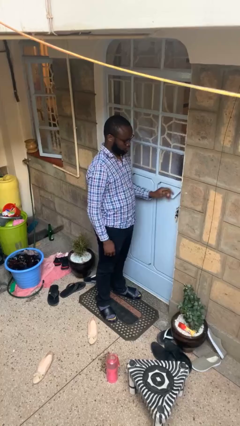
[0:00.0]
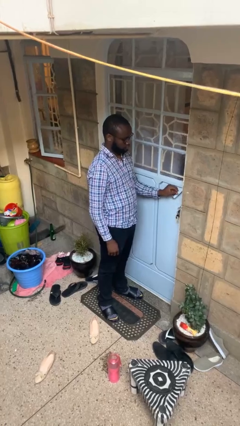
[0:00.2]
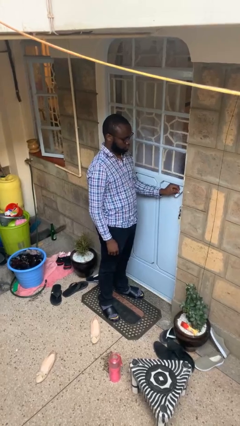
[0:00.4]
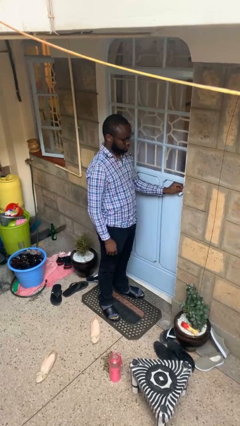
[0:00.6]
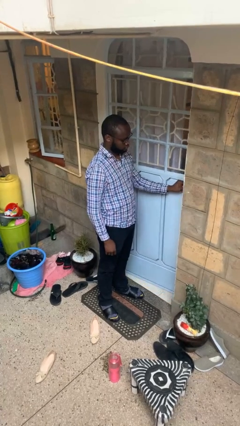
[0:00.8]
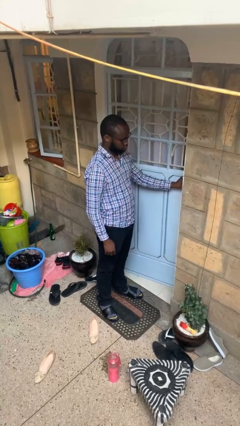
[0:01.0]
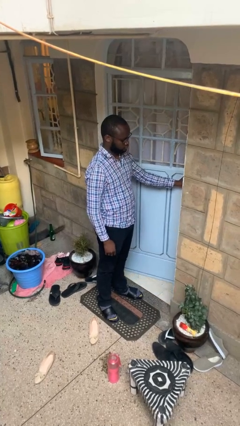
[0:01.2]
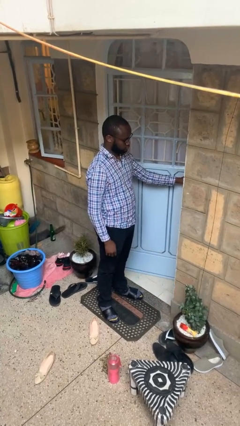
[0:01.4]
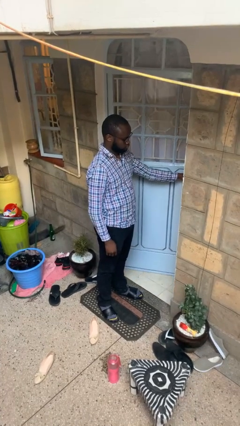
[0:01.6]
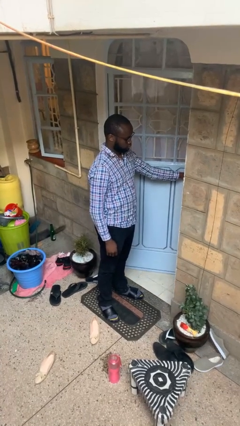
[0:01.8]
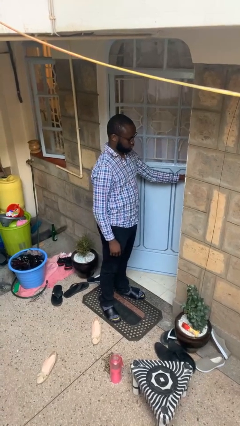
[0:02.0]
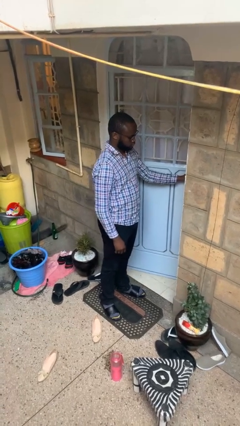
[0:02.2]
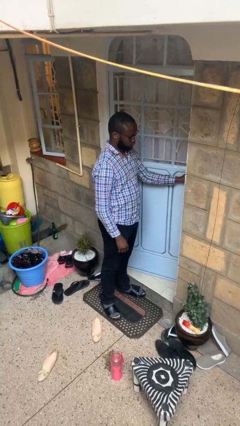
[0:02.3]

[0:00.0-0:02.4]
person opens facility door

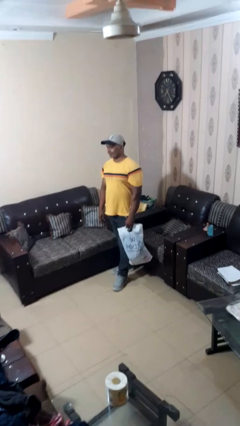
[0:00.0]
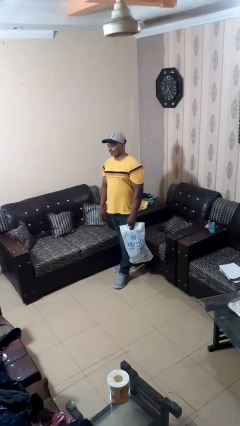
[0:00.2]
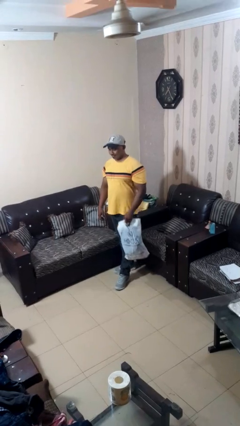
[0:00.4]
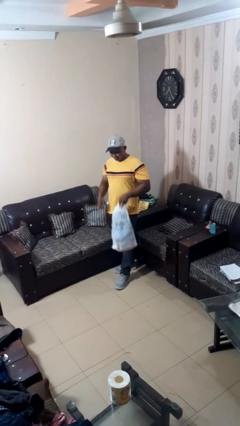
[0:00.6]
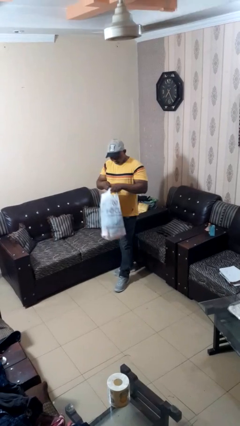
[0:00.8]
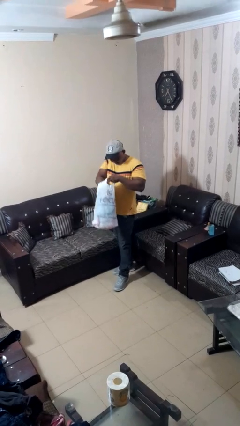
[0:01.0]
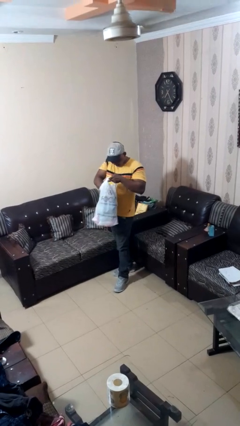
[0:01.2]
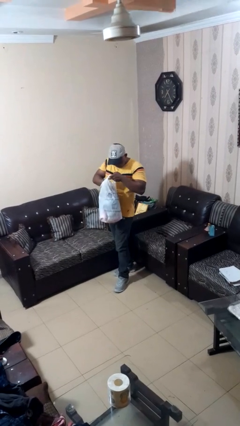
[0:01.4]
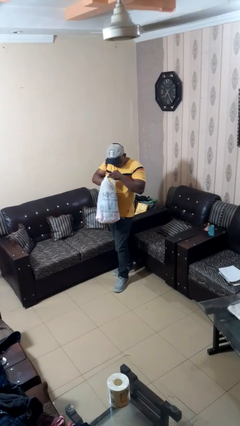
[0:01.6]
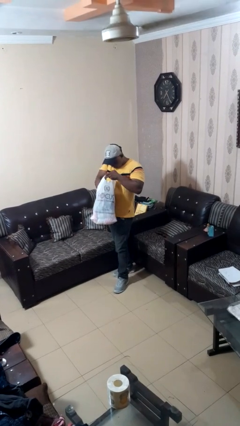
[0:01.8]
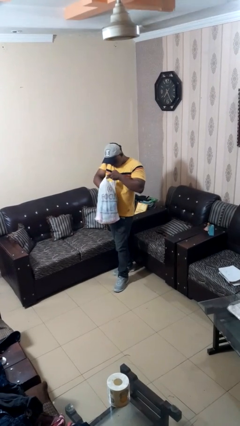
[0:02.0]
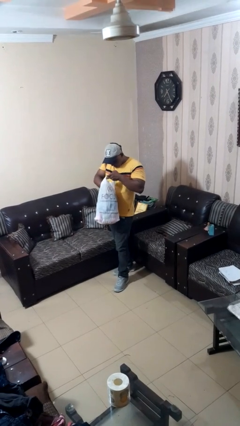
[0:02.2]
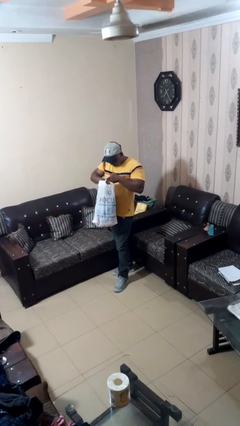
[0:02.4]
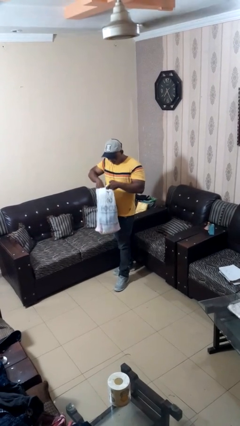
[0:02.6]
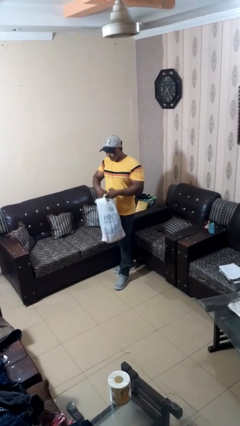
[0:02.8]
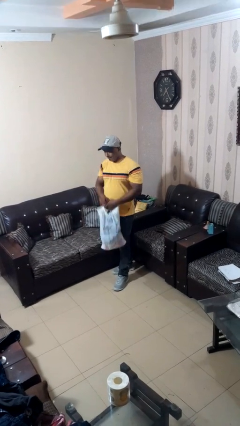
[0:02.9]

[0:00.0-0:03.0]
person searches in bag

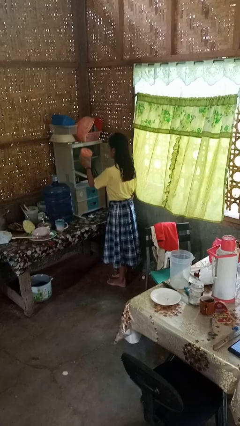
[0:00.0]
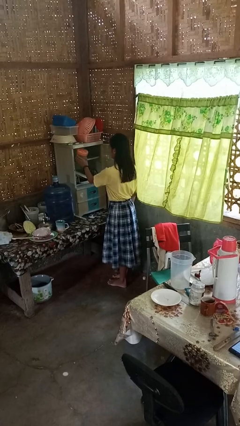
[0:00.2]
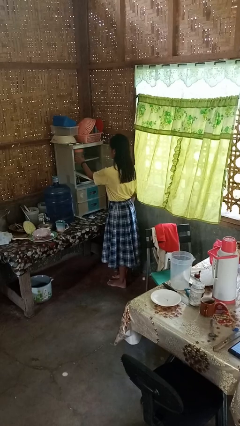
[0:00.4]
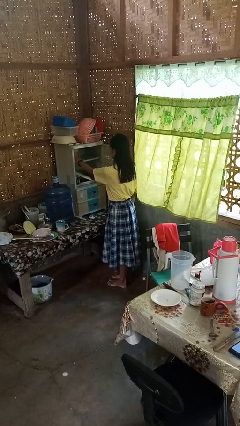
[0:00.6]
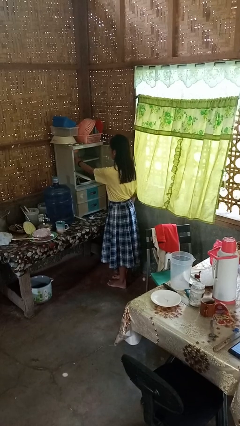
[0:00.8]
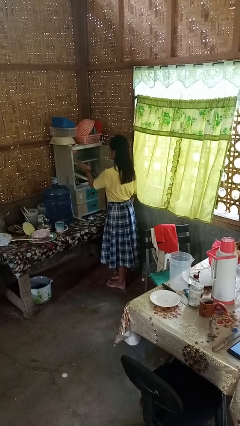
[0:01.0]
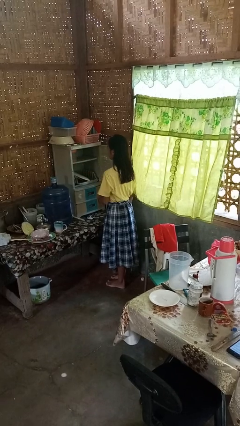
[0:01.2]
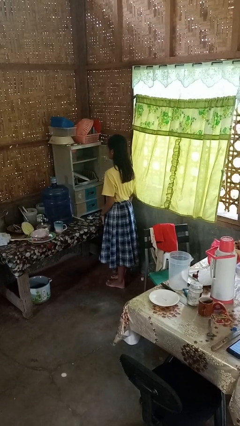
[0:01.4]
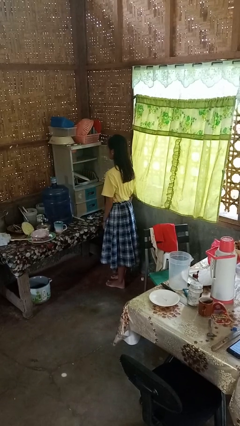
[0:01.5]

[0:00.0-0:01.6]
person puts down object into cabinet

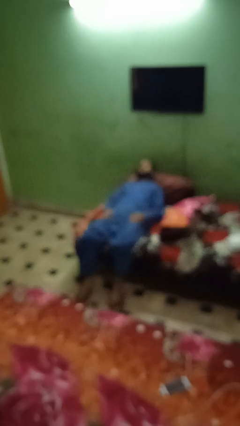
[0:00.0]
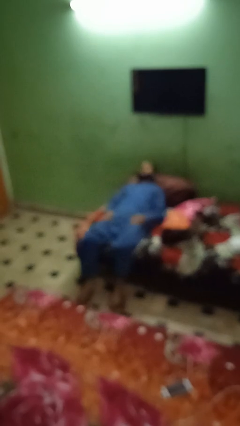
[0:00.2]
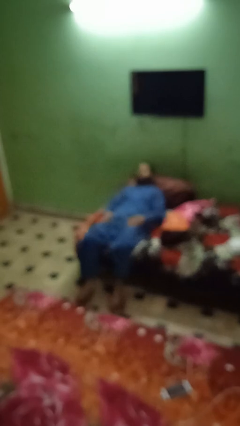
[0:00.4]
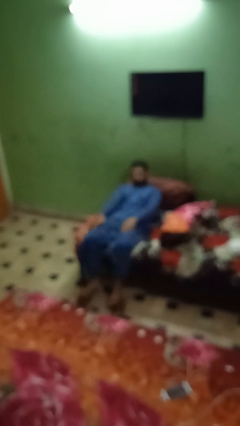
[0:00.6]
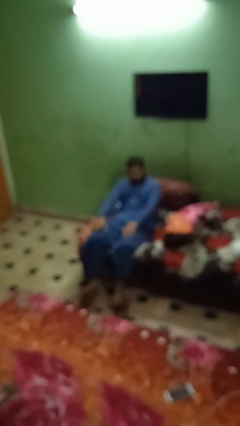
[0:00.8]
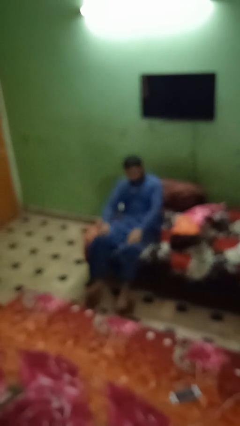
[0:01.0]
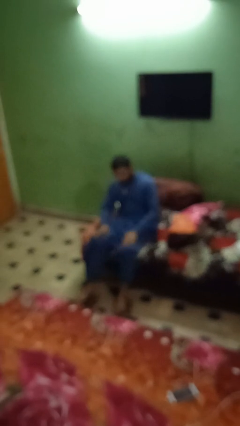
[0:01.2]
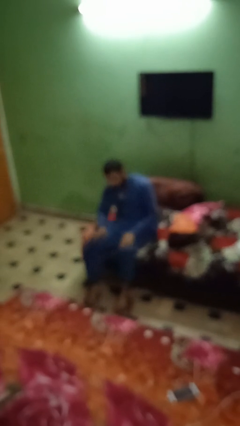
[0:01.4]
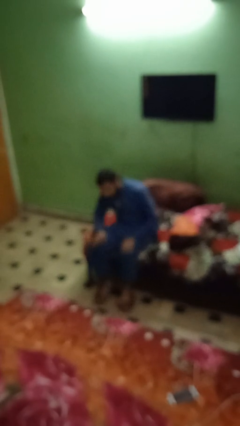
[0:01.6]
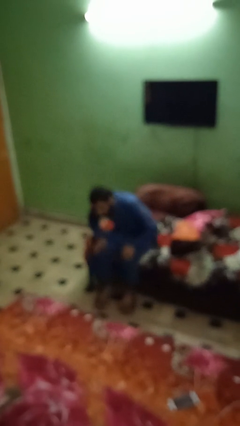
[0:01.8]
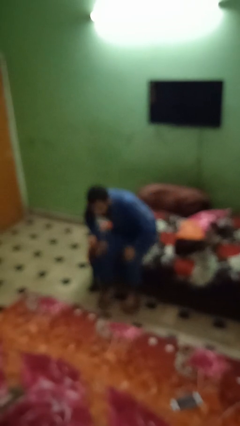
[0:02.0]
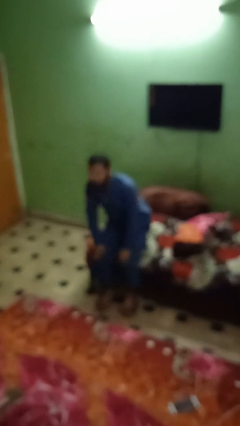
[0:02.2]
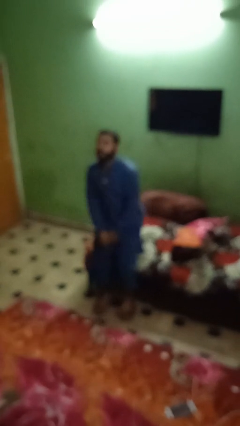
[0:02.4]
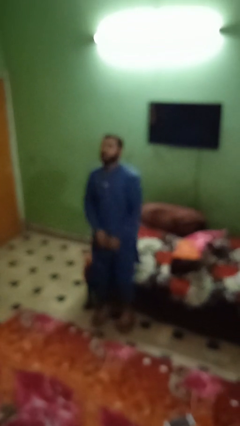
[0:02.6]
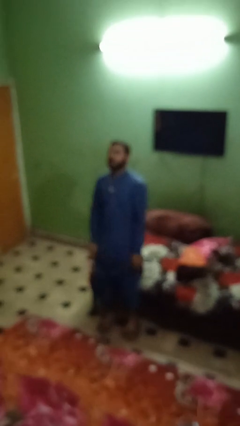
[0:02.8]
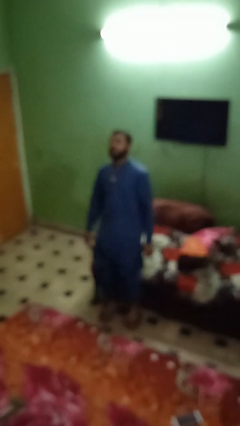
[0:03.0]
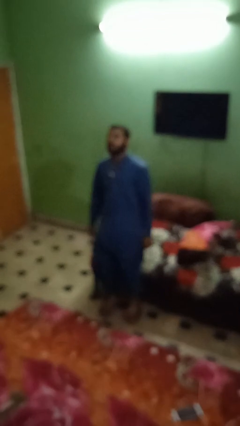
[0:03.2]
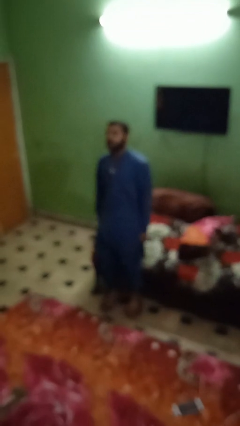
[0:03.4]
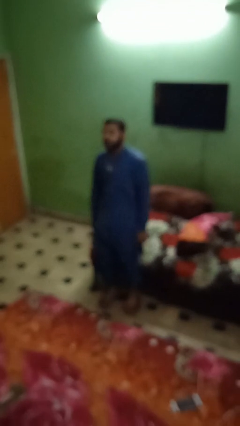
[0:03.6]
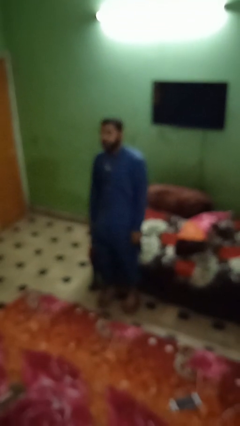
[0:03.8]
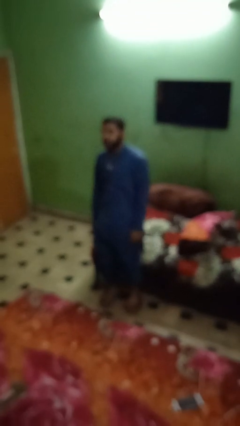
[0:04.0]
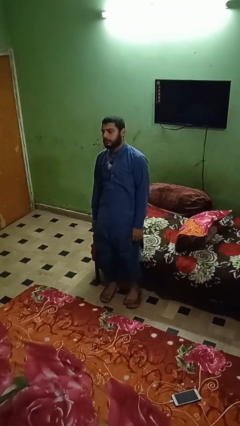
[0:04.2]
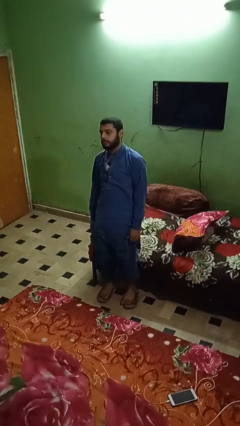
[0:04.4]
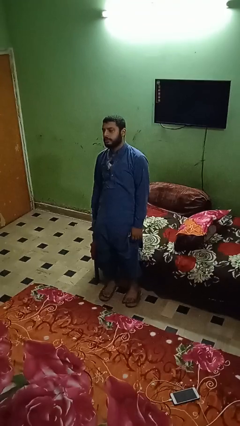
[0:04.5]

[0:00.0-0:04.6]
person stands up

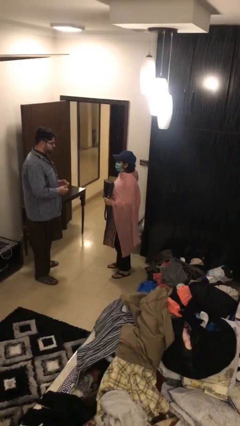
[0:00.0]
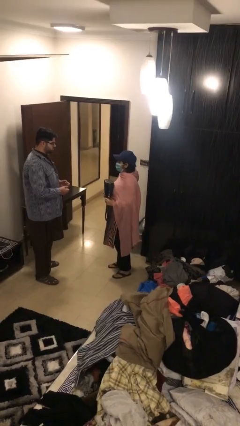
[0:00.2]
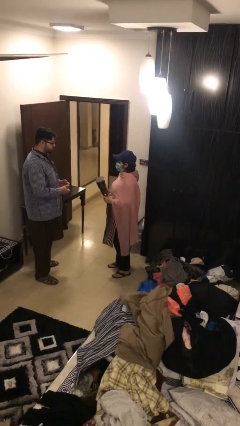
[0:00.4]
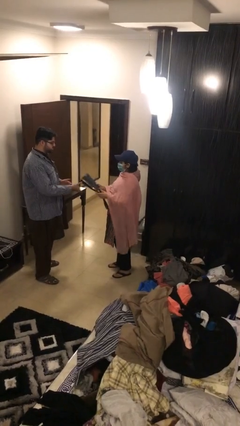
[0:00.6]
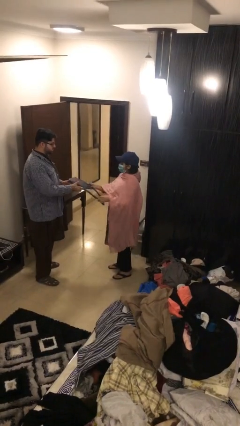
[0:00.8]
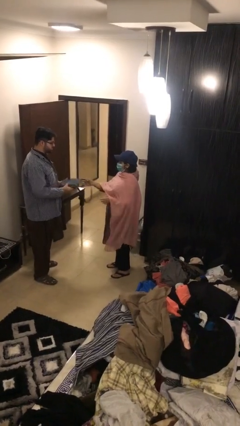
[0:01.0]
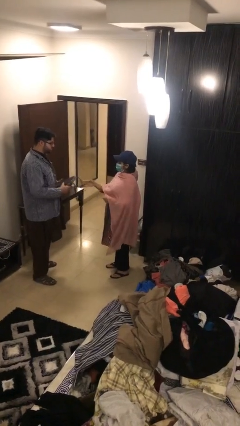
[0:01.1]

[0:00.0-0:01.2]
person transfers object to person

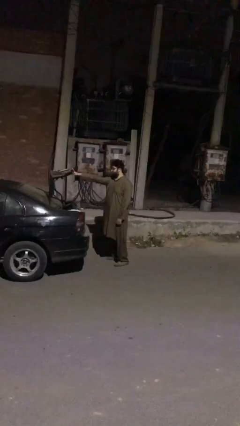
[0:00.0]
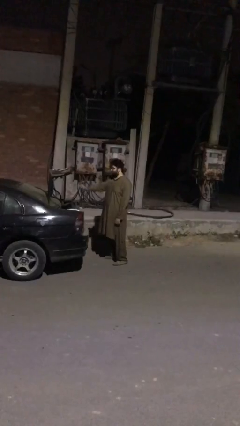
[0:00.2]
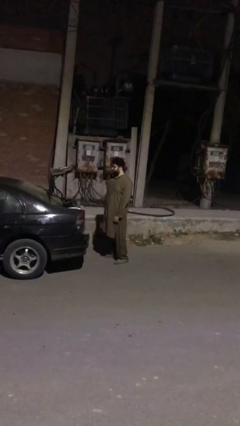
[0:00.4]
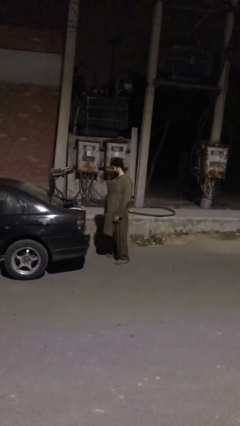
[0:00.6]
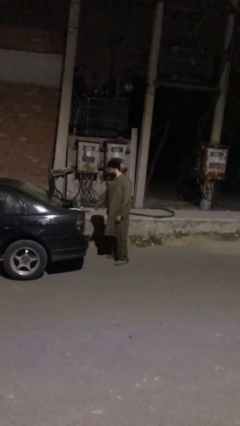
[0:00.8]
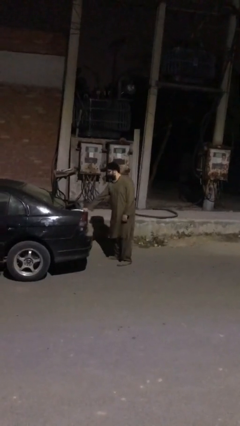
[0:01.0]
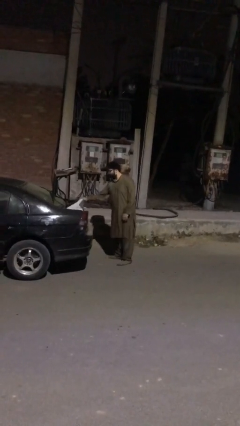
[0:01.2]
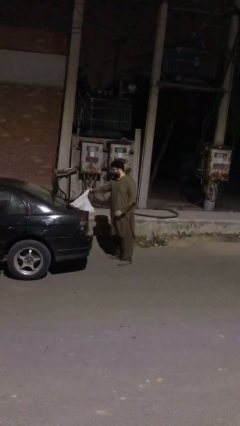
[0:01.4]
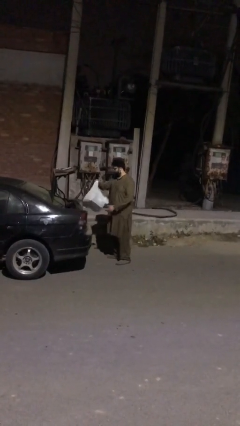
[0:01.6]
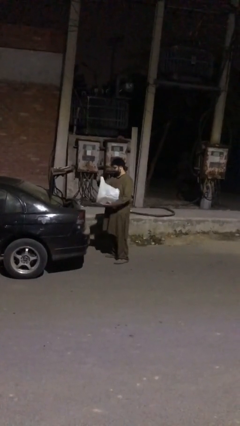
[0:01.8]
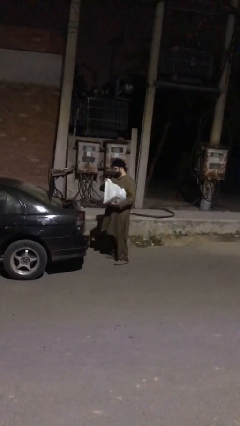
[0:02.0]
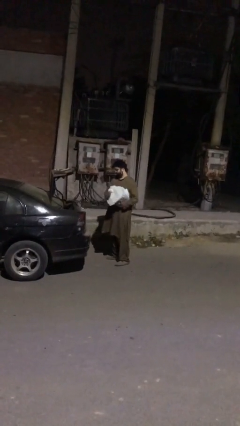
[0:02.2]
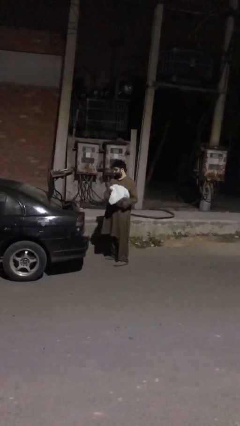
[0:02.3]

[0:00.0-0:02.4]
person unloads car

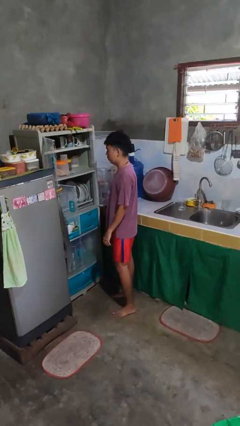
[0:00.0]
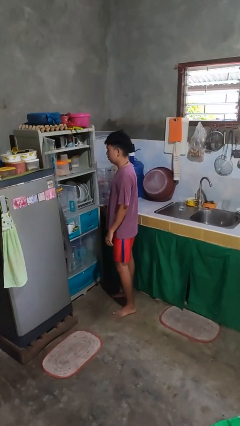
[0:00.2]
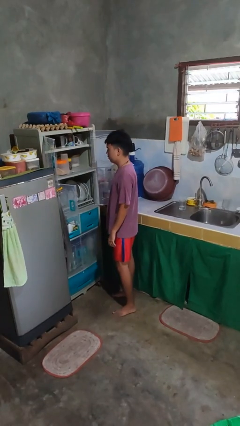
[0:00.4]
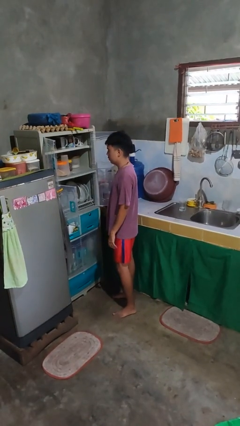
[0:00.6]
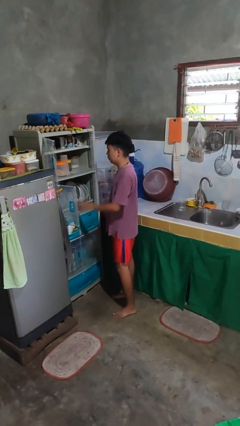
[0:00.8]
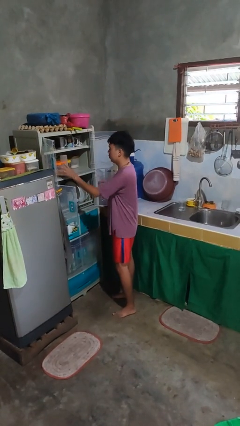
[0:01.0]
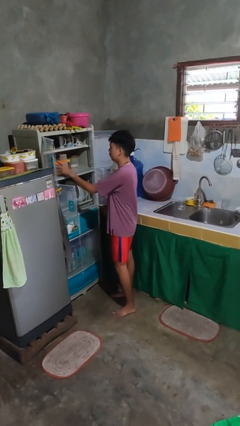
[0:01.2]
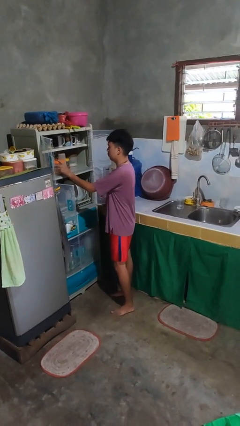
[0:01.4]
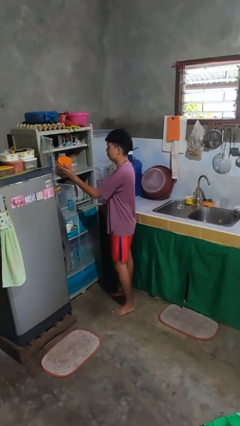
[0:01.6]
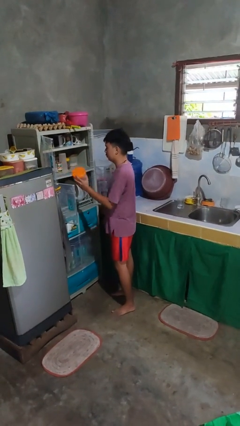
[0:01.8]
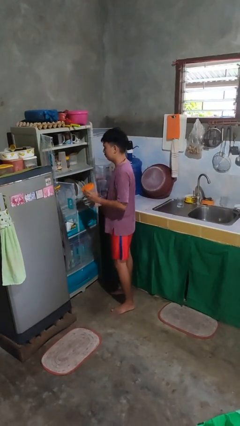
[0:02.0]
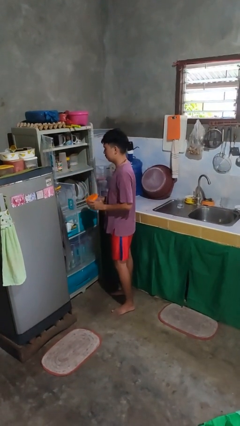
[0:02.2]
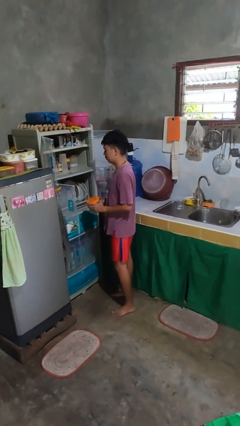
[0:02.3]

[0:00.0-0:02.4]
person takes object from cabinet
